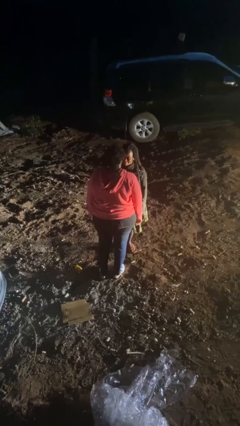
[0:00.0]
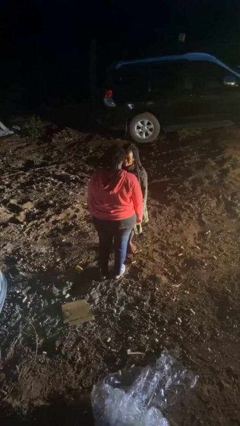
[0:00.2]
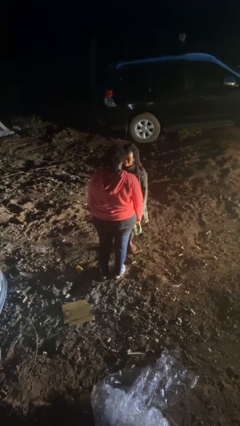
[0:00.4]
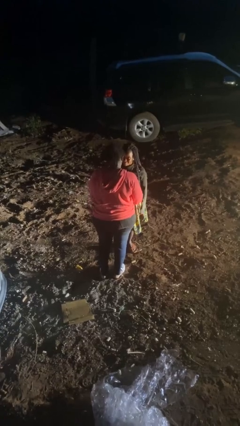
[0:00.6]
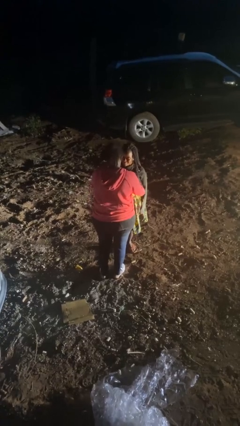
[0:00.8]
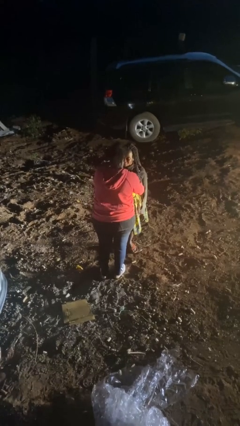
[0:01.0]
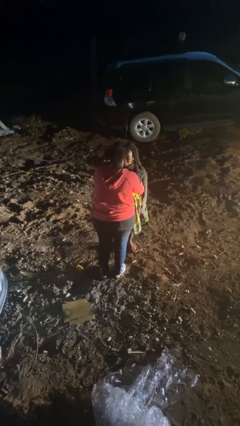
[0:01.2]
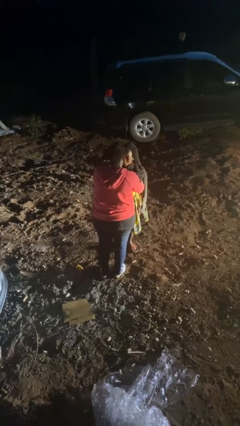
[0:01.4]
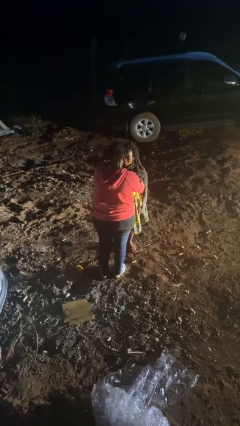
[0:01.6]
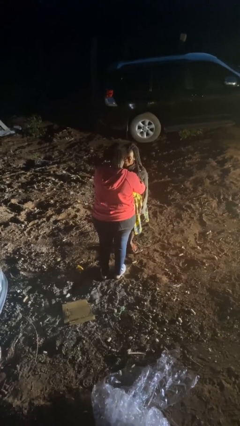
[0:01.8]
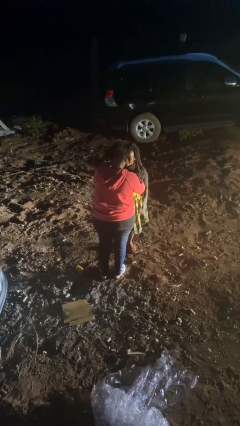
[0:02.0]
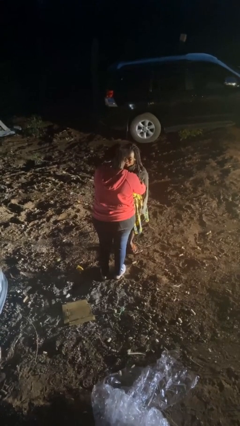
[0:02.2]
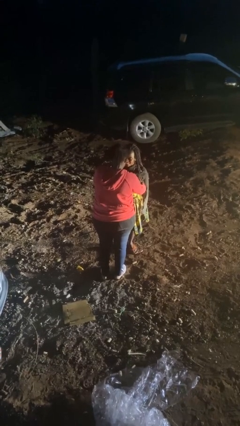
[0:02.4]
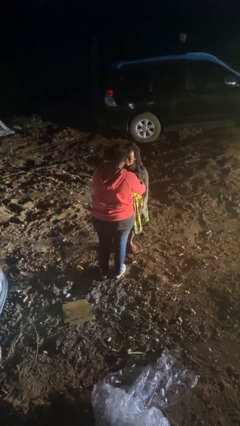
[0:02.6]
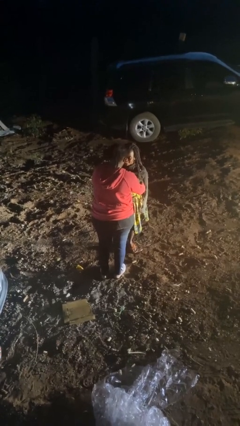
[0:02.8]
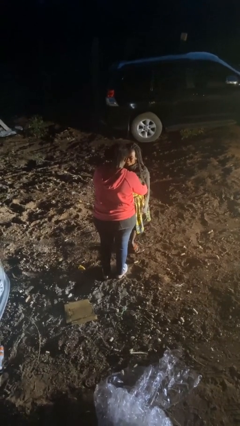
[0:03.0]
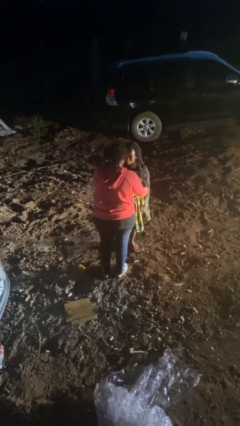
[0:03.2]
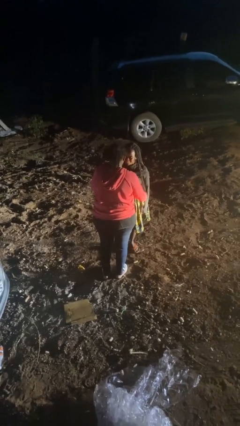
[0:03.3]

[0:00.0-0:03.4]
person tickles person

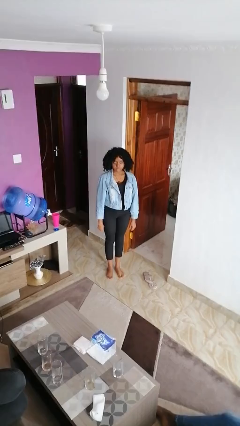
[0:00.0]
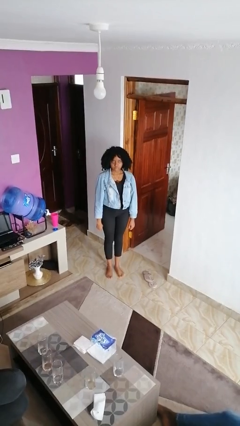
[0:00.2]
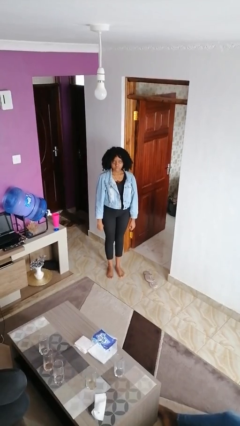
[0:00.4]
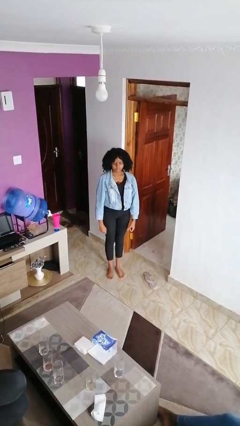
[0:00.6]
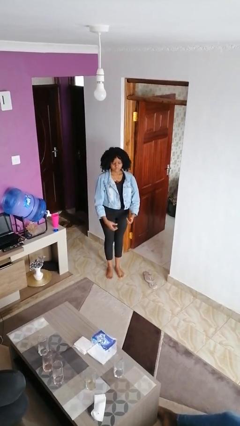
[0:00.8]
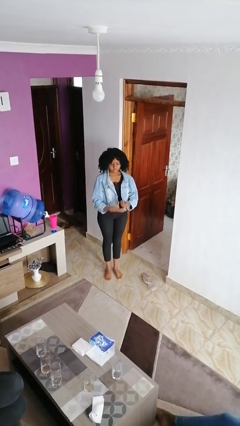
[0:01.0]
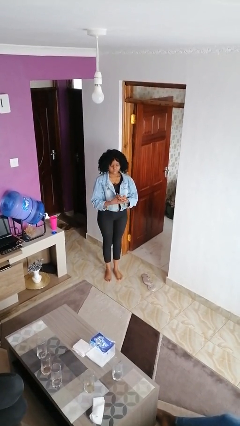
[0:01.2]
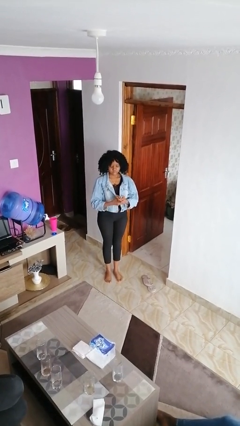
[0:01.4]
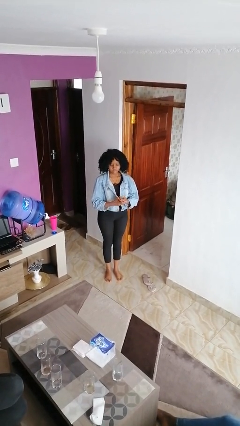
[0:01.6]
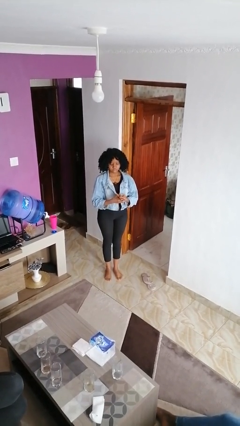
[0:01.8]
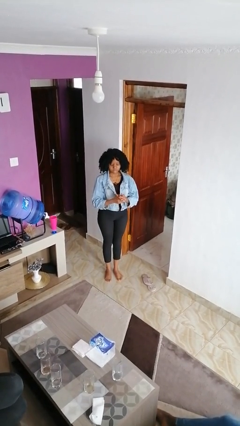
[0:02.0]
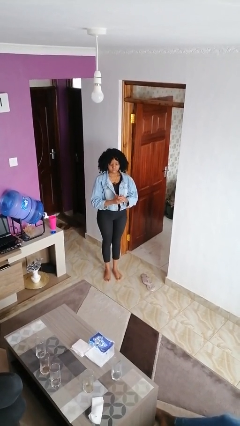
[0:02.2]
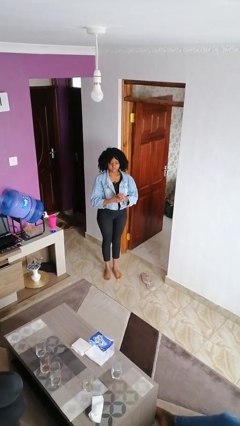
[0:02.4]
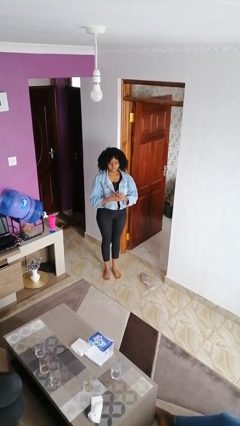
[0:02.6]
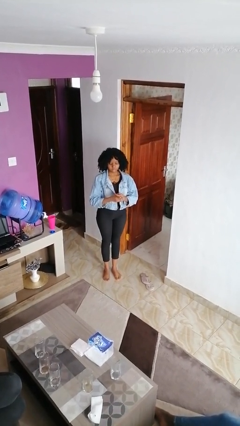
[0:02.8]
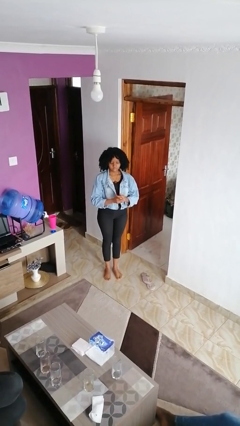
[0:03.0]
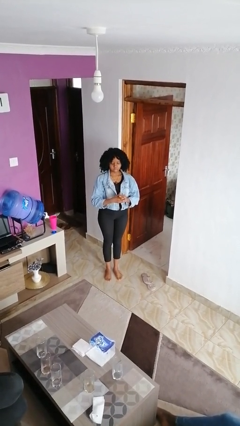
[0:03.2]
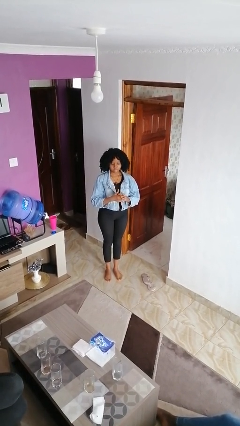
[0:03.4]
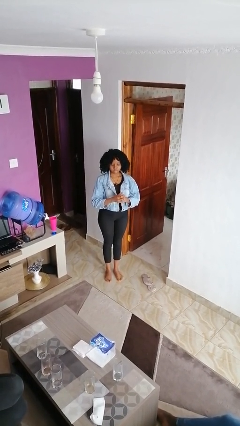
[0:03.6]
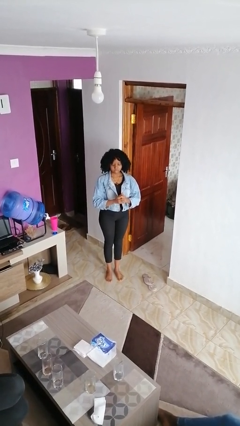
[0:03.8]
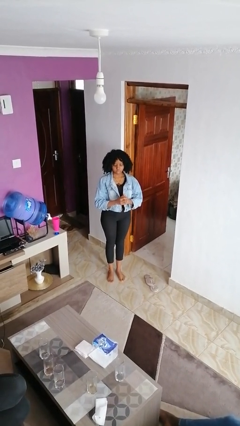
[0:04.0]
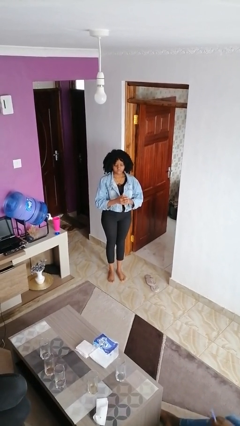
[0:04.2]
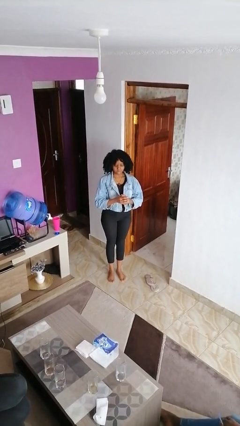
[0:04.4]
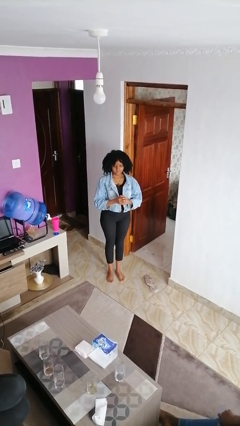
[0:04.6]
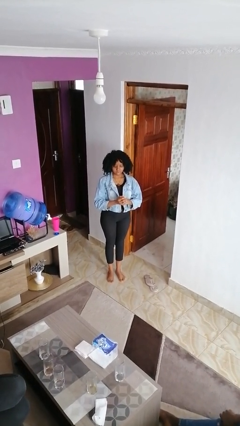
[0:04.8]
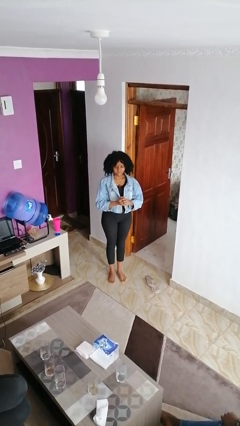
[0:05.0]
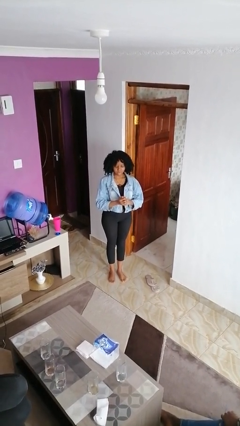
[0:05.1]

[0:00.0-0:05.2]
person cracks knuckles

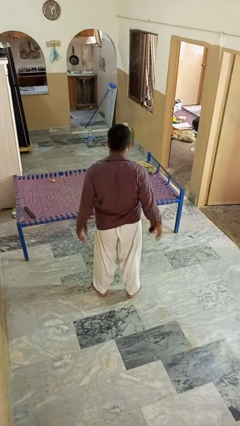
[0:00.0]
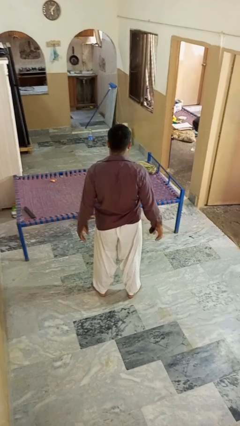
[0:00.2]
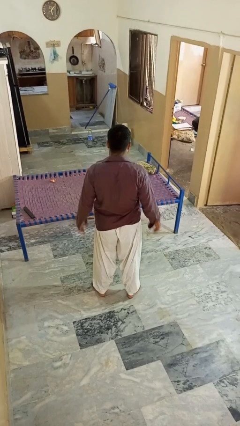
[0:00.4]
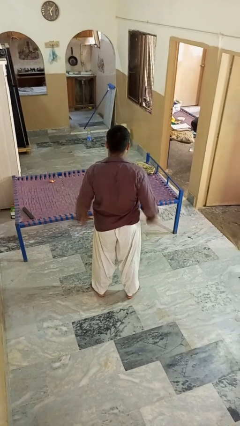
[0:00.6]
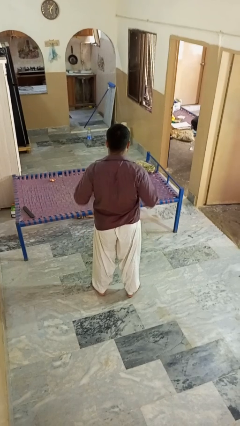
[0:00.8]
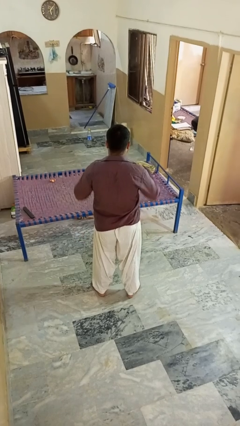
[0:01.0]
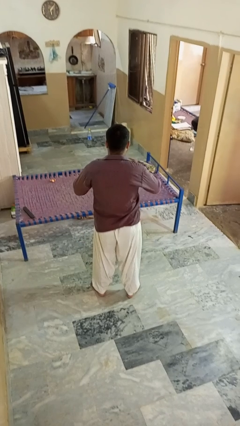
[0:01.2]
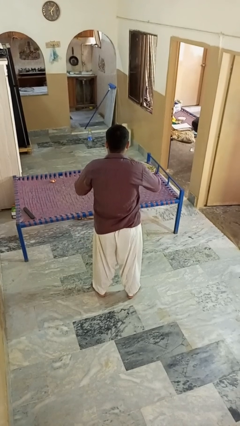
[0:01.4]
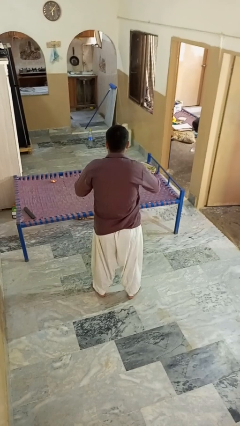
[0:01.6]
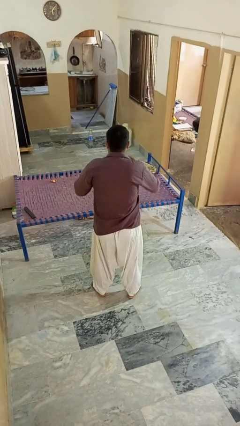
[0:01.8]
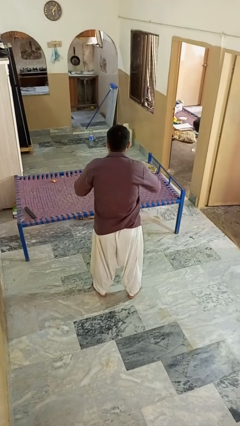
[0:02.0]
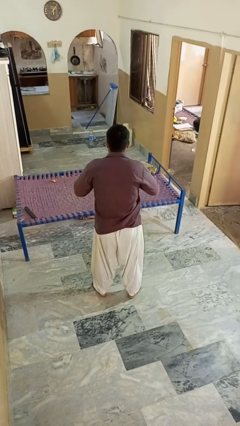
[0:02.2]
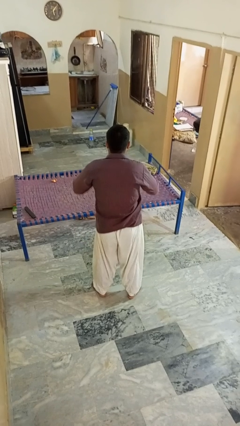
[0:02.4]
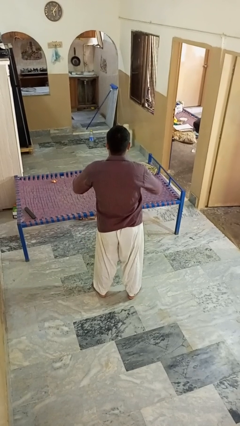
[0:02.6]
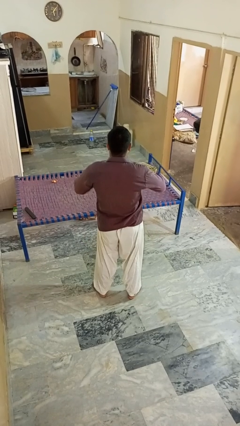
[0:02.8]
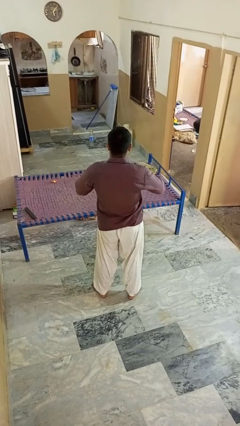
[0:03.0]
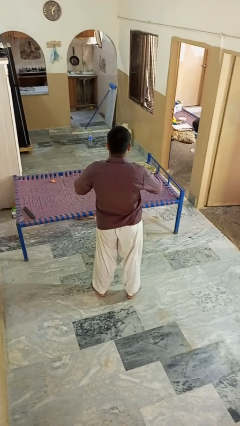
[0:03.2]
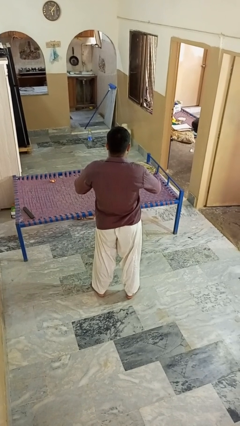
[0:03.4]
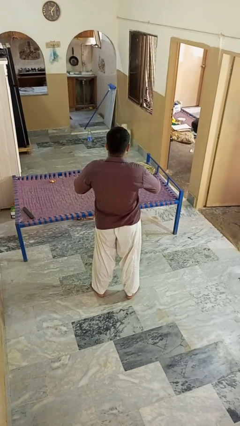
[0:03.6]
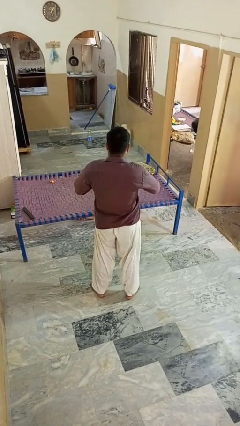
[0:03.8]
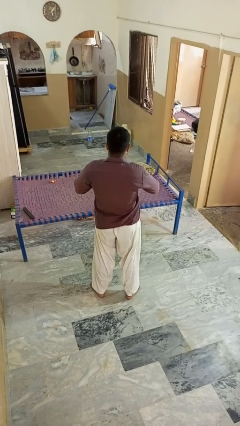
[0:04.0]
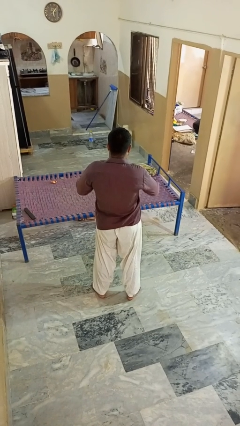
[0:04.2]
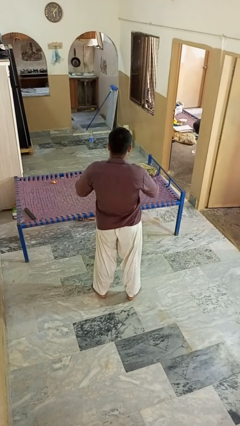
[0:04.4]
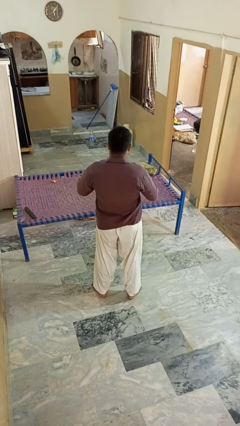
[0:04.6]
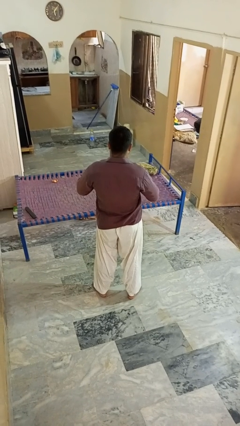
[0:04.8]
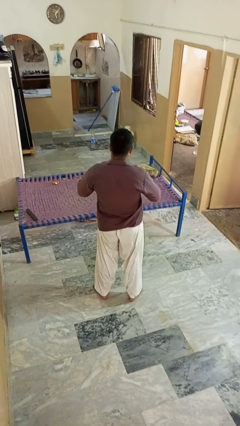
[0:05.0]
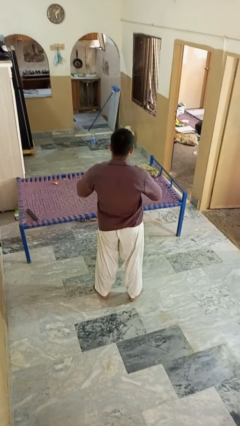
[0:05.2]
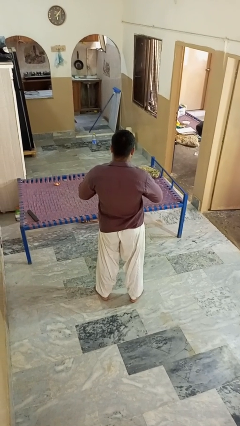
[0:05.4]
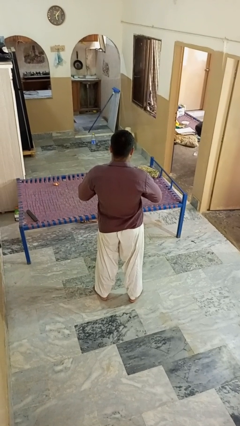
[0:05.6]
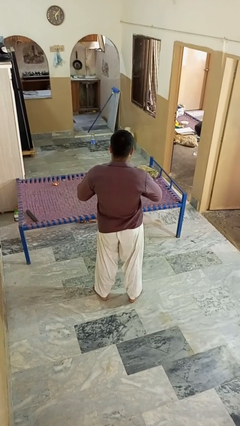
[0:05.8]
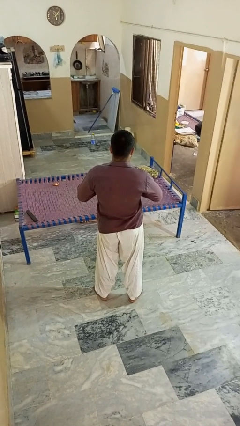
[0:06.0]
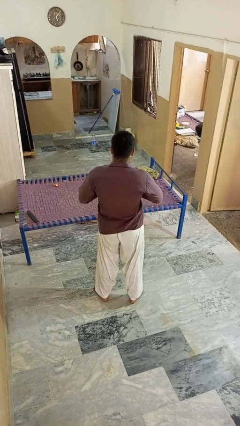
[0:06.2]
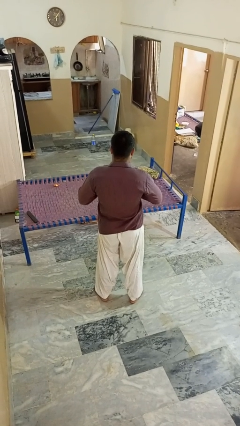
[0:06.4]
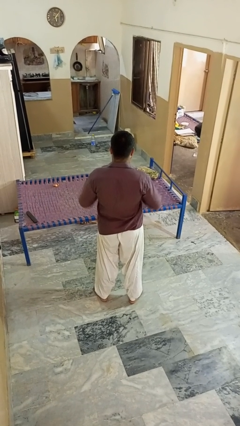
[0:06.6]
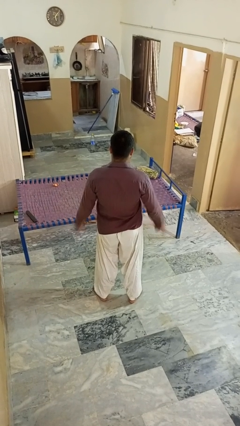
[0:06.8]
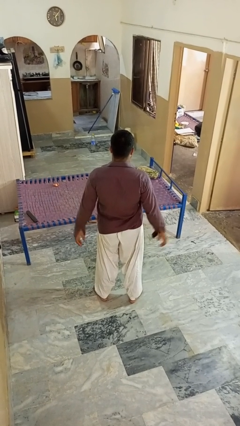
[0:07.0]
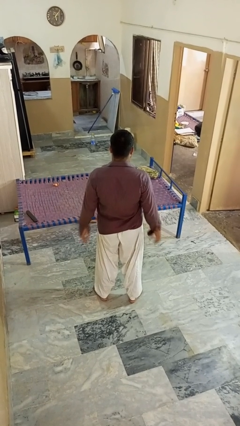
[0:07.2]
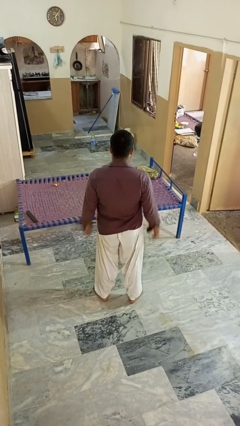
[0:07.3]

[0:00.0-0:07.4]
person buttons shirt

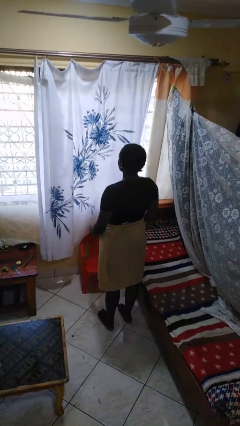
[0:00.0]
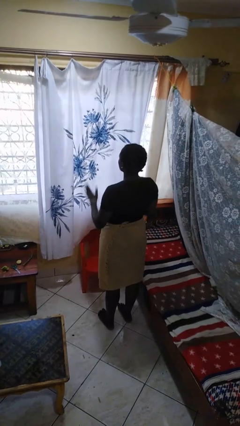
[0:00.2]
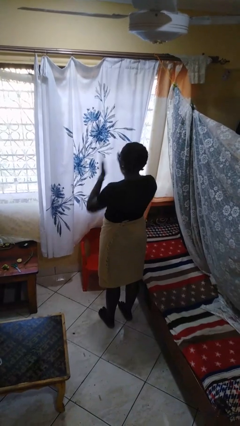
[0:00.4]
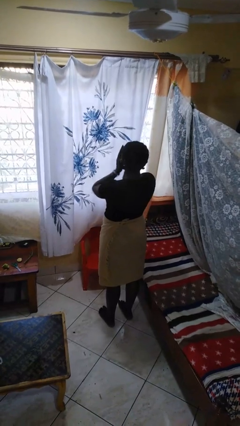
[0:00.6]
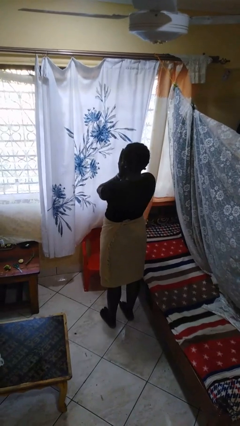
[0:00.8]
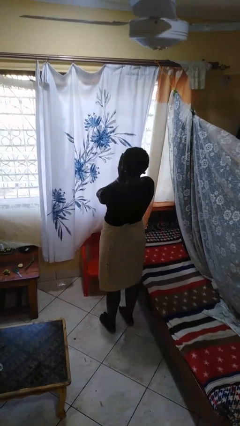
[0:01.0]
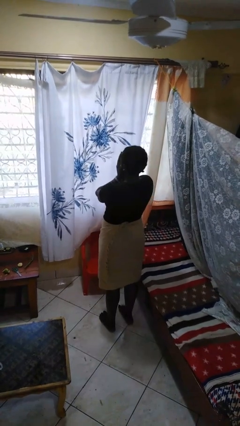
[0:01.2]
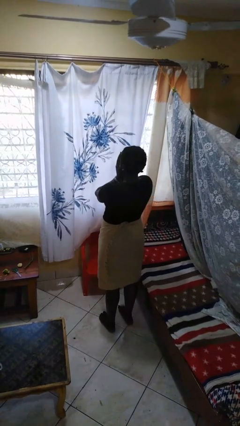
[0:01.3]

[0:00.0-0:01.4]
person covers face with hands

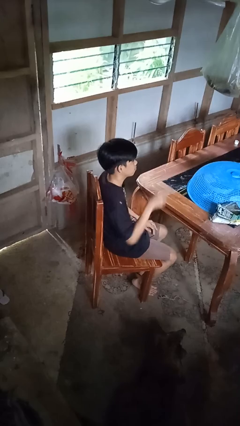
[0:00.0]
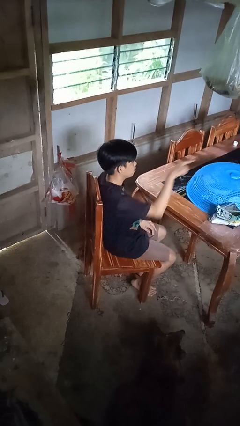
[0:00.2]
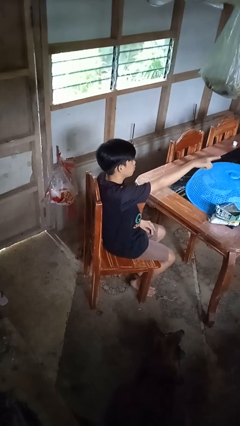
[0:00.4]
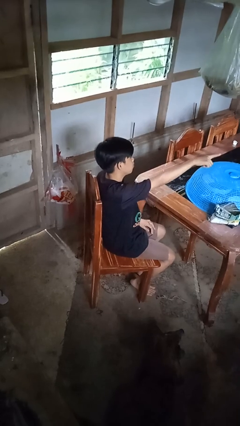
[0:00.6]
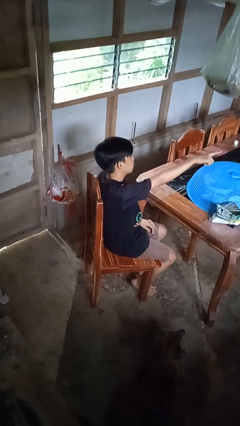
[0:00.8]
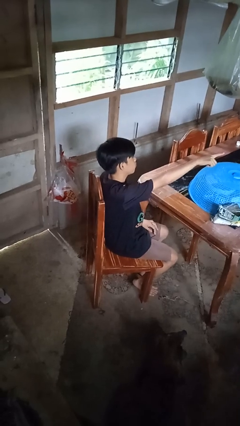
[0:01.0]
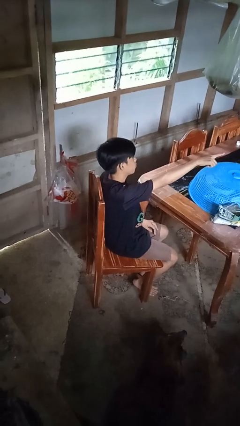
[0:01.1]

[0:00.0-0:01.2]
person points at person
